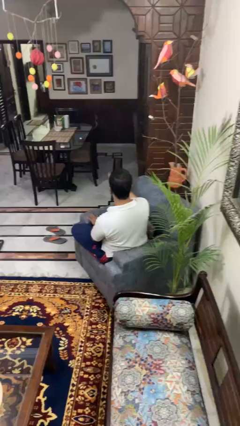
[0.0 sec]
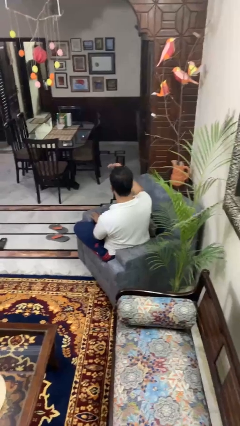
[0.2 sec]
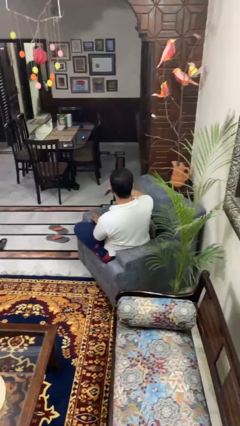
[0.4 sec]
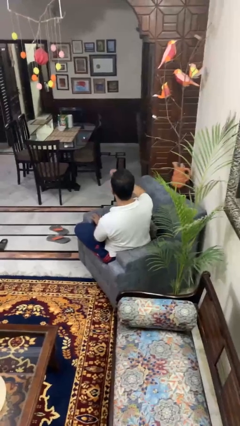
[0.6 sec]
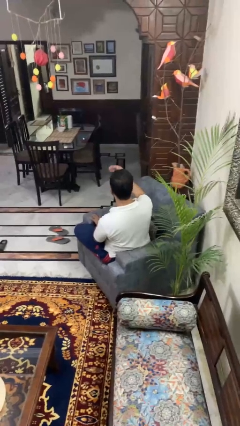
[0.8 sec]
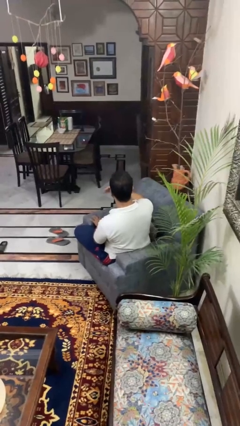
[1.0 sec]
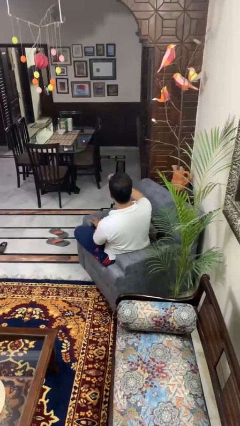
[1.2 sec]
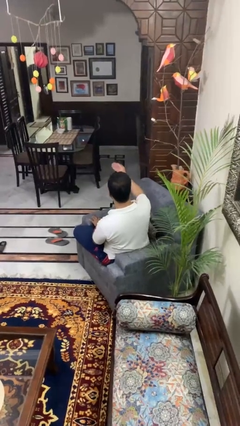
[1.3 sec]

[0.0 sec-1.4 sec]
person gestures come here

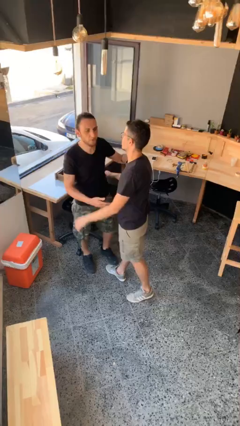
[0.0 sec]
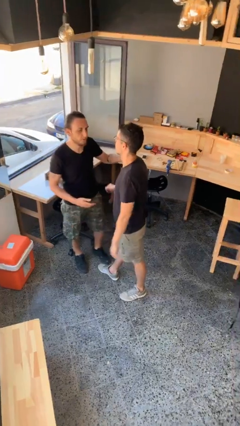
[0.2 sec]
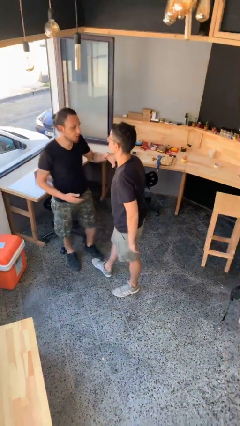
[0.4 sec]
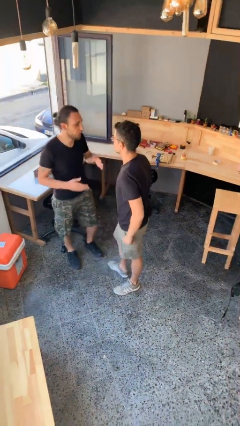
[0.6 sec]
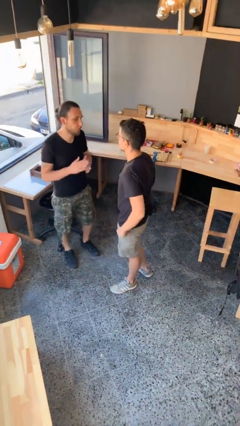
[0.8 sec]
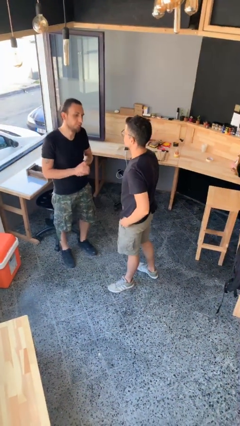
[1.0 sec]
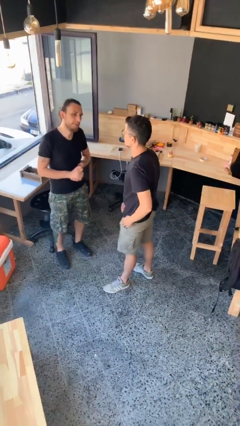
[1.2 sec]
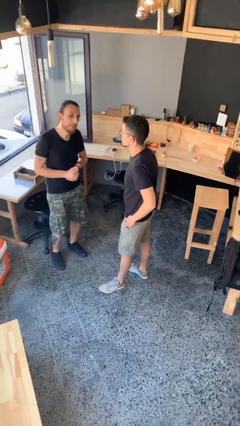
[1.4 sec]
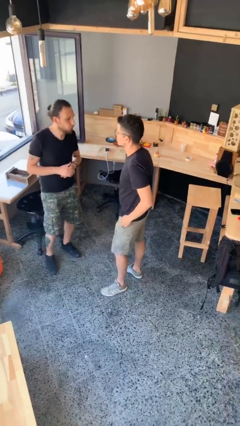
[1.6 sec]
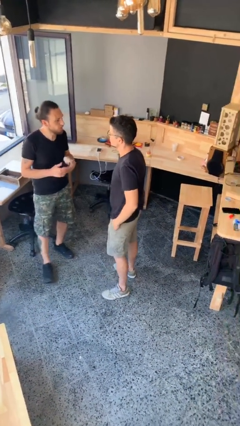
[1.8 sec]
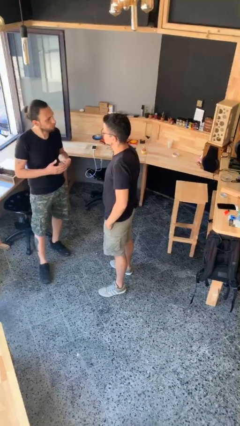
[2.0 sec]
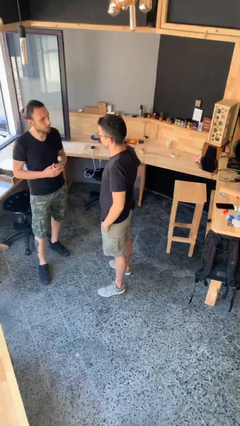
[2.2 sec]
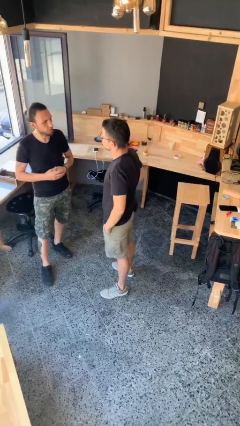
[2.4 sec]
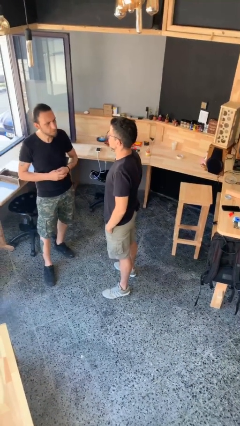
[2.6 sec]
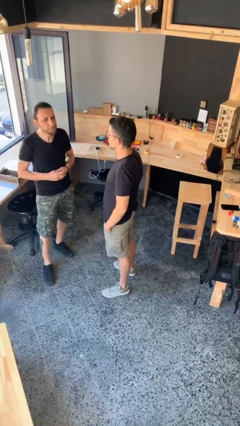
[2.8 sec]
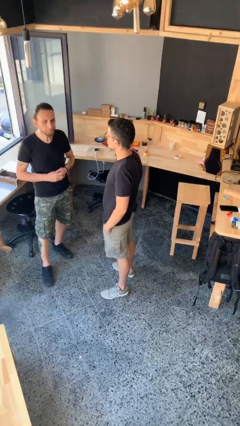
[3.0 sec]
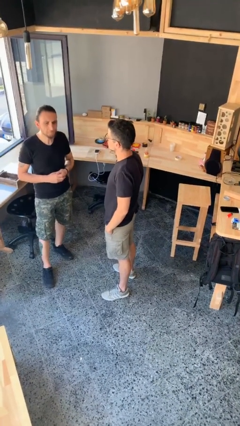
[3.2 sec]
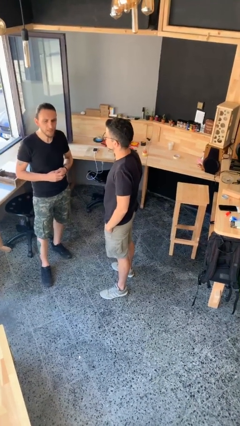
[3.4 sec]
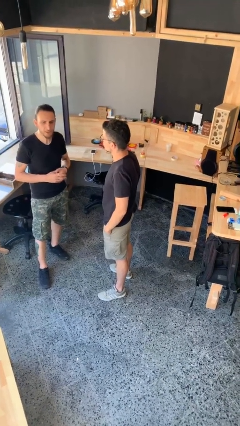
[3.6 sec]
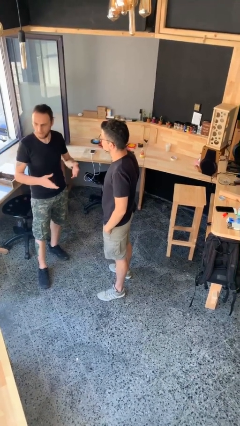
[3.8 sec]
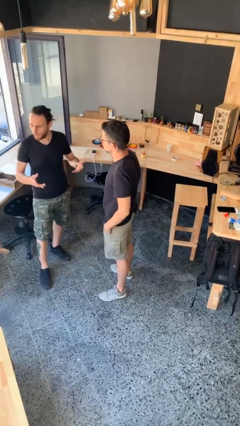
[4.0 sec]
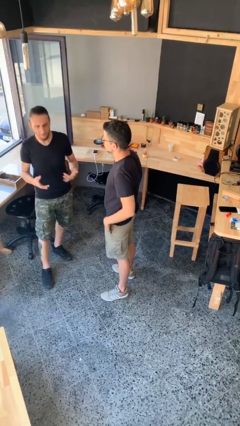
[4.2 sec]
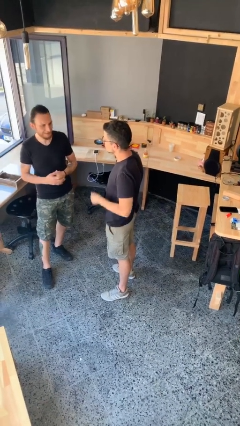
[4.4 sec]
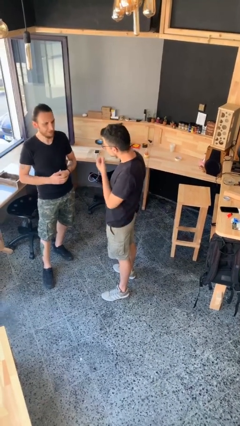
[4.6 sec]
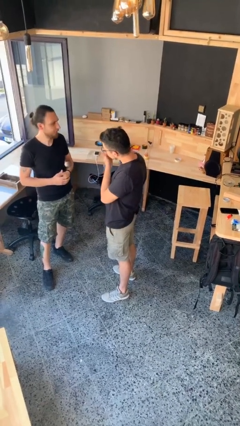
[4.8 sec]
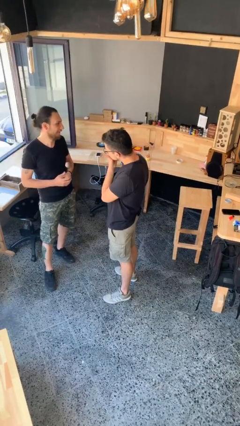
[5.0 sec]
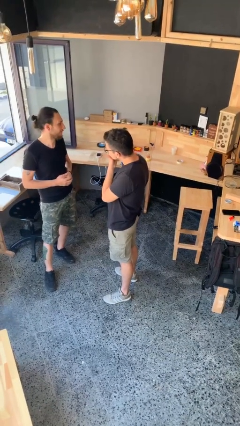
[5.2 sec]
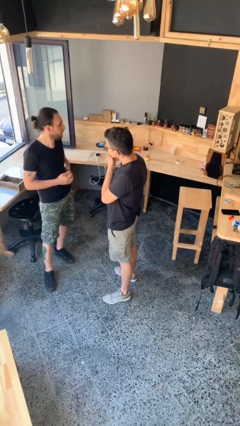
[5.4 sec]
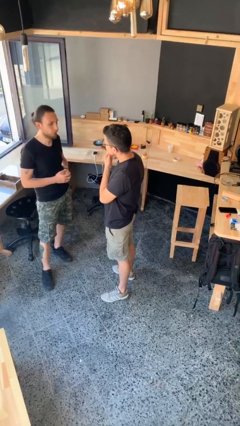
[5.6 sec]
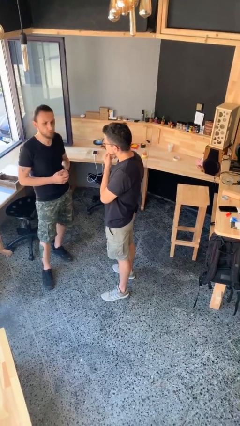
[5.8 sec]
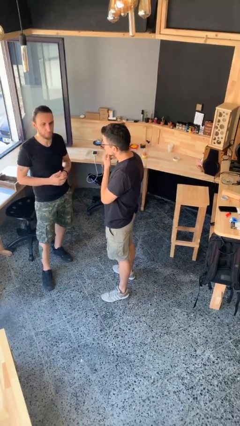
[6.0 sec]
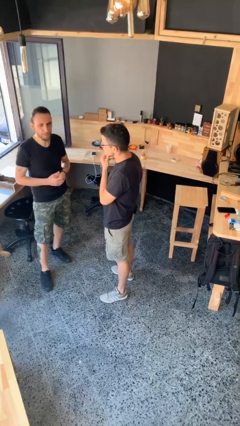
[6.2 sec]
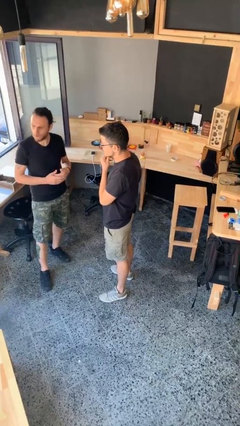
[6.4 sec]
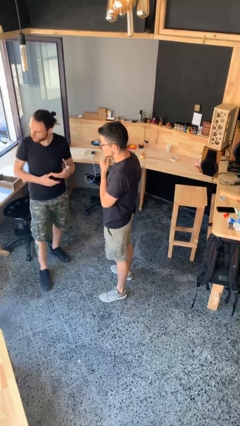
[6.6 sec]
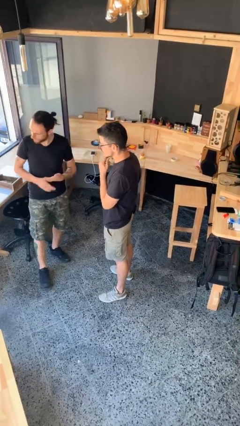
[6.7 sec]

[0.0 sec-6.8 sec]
person talks to person

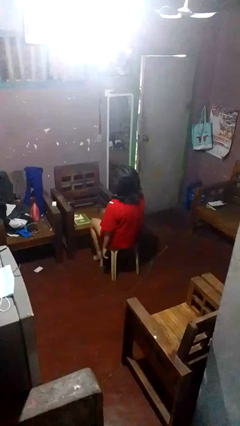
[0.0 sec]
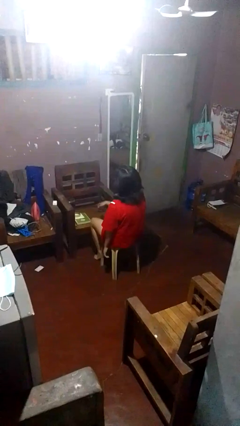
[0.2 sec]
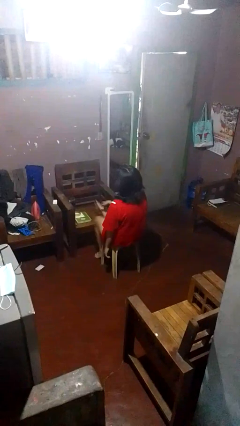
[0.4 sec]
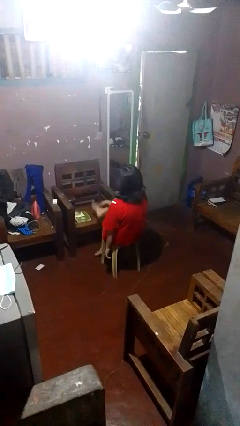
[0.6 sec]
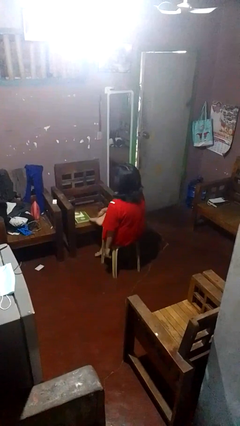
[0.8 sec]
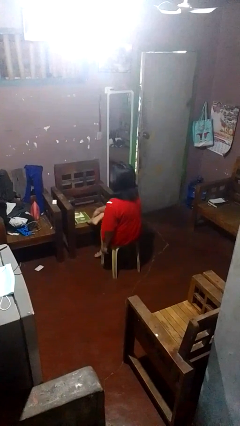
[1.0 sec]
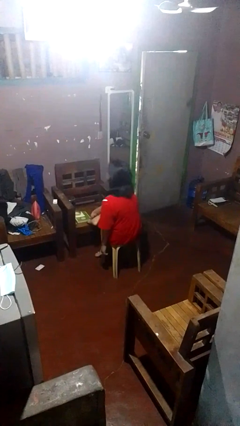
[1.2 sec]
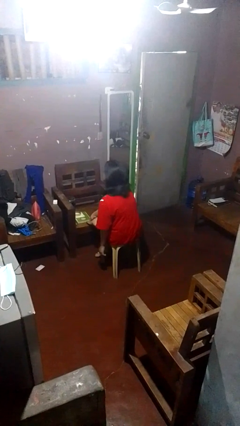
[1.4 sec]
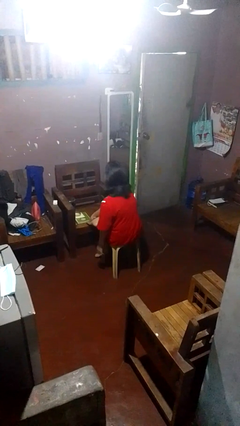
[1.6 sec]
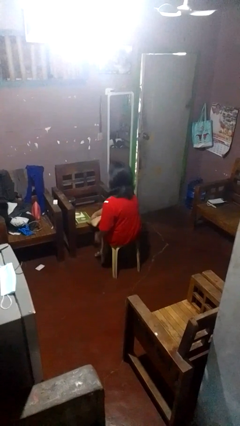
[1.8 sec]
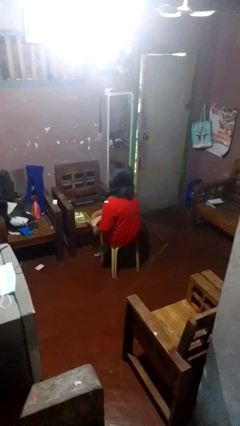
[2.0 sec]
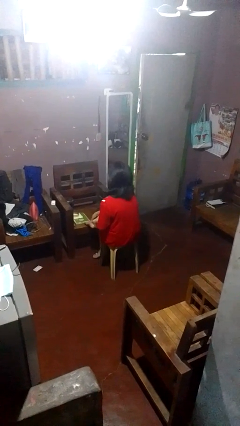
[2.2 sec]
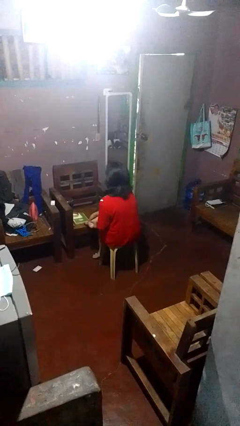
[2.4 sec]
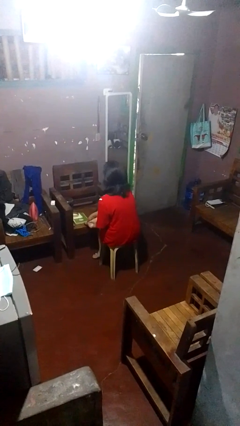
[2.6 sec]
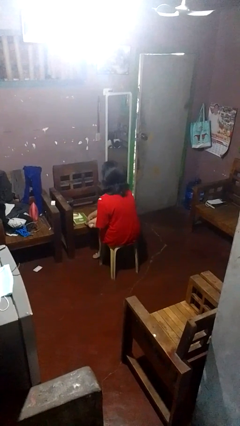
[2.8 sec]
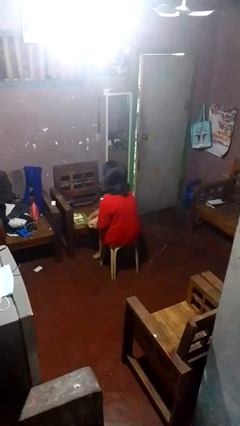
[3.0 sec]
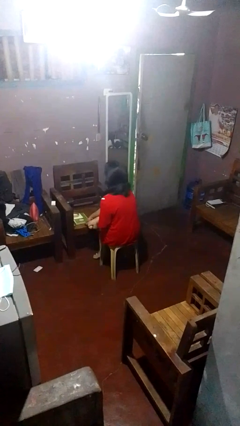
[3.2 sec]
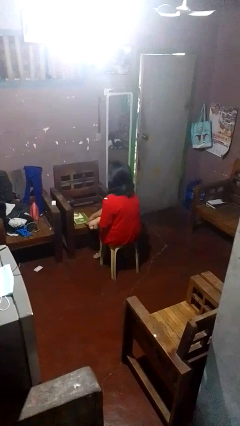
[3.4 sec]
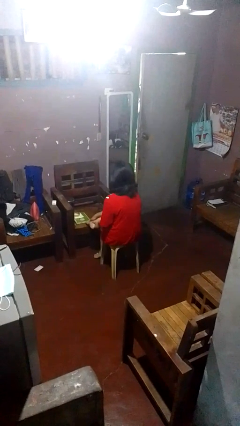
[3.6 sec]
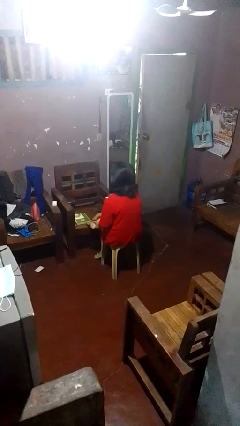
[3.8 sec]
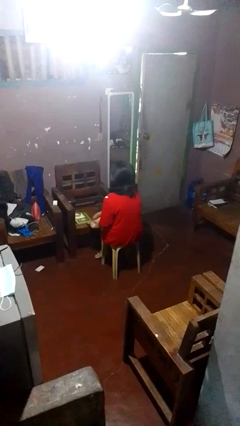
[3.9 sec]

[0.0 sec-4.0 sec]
person rubs foot

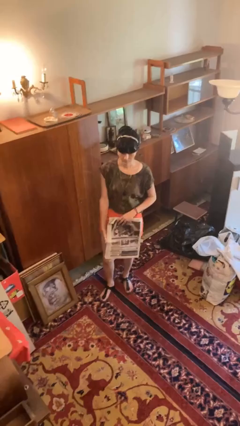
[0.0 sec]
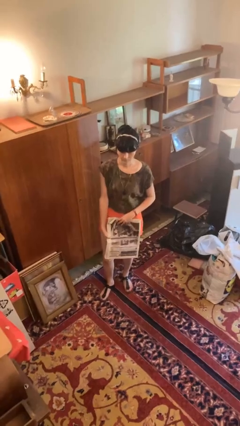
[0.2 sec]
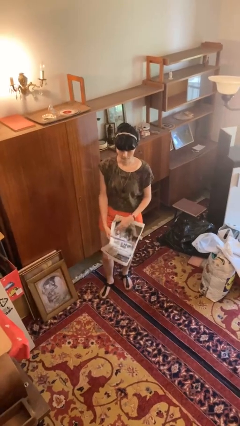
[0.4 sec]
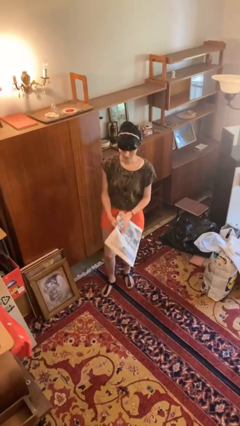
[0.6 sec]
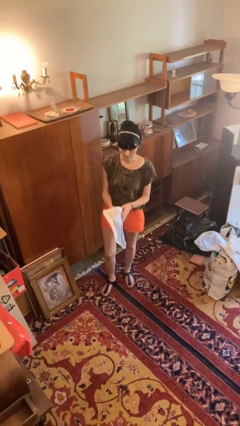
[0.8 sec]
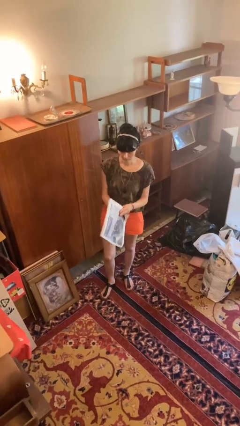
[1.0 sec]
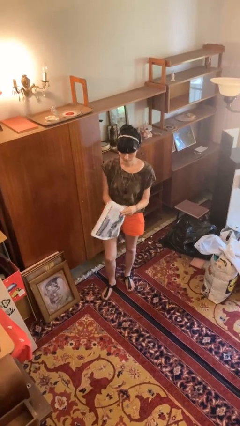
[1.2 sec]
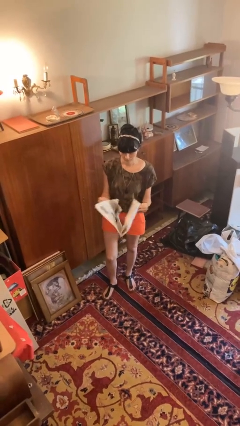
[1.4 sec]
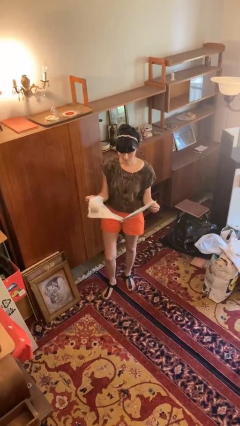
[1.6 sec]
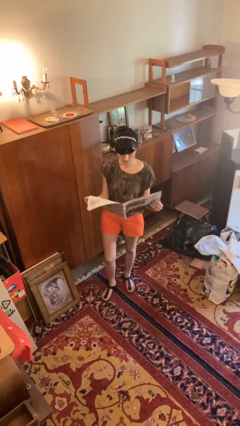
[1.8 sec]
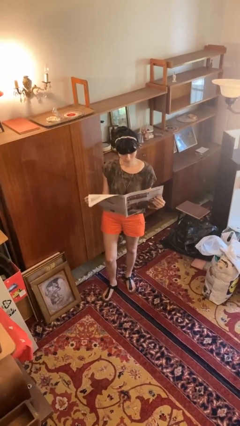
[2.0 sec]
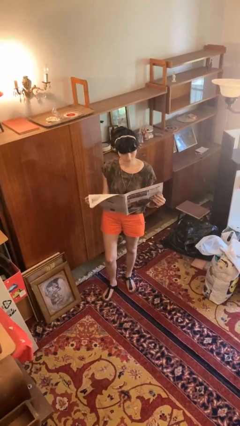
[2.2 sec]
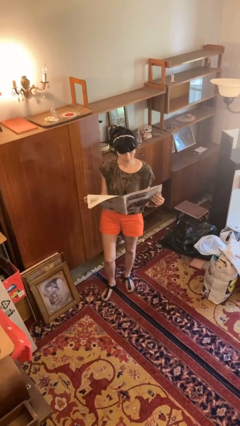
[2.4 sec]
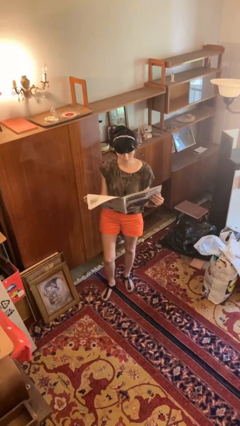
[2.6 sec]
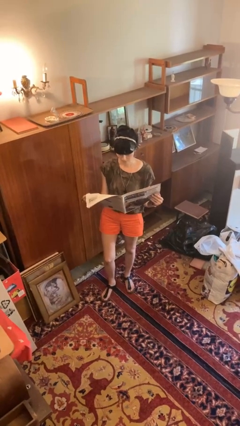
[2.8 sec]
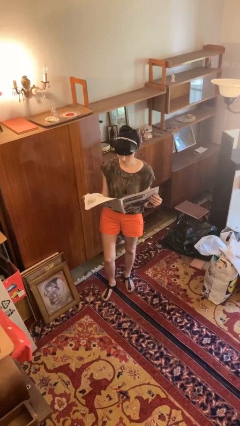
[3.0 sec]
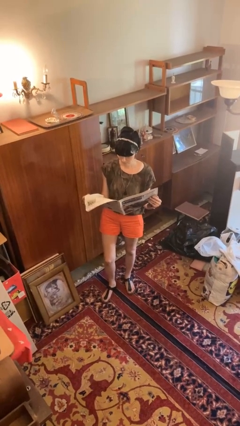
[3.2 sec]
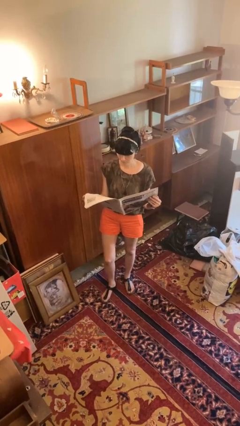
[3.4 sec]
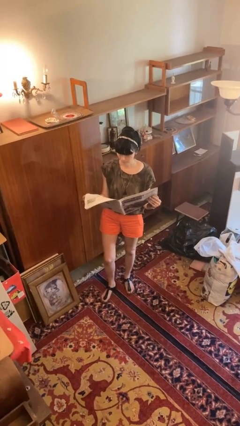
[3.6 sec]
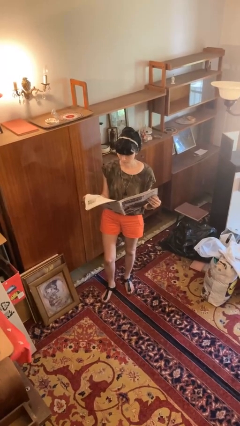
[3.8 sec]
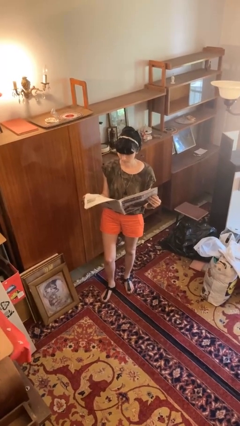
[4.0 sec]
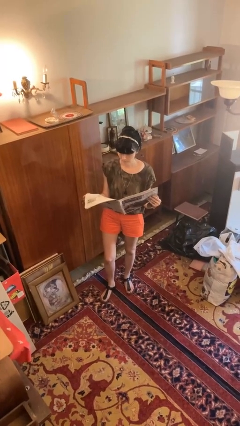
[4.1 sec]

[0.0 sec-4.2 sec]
person reads newspaper

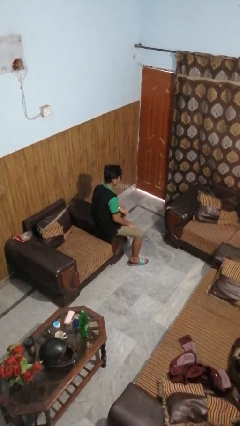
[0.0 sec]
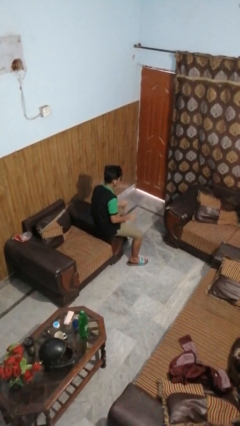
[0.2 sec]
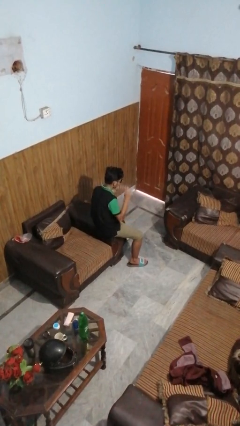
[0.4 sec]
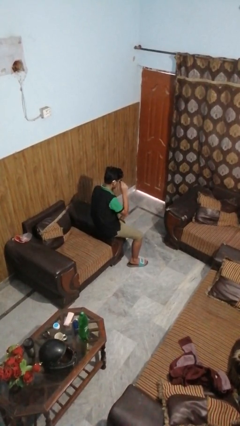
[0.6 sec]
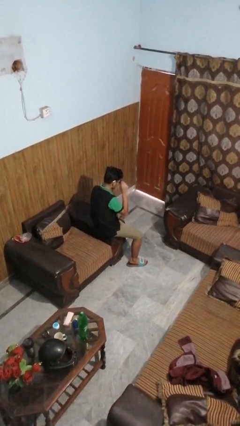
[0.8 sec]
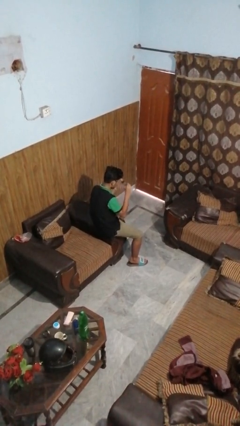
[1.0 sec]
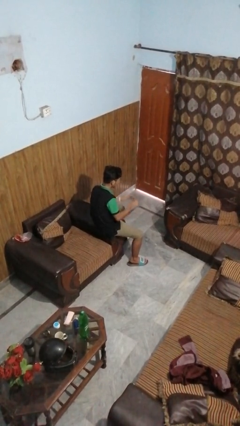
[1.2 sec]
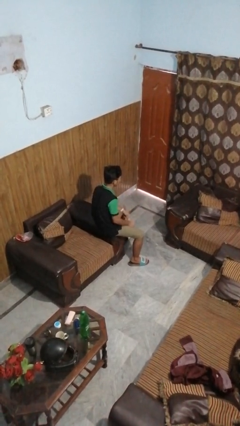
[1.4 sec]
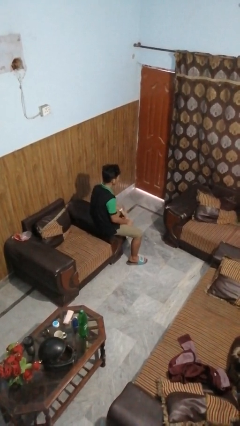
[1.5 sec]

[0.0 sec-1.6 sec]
person takes off sunglasses
